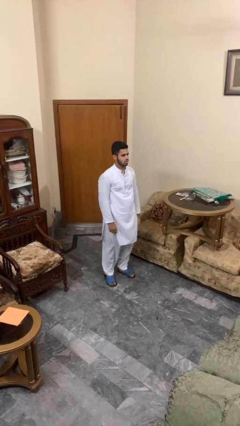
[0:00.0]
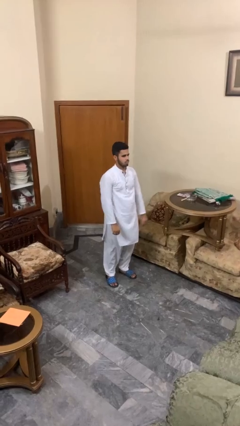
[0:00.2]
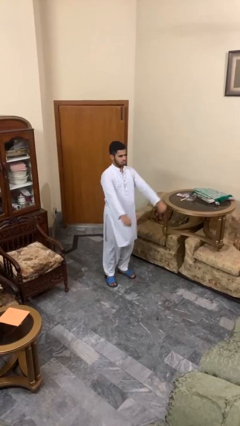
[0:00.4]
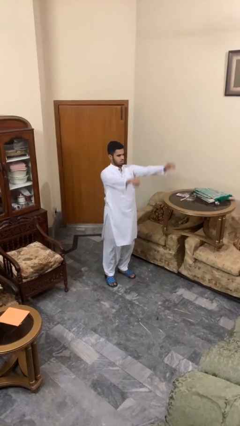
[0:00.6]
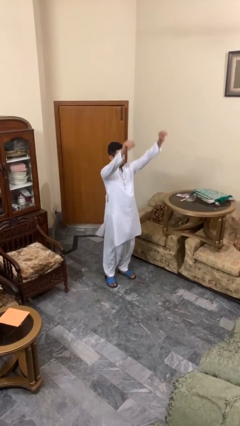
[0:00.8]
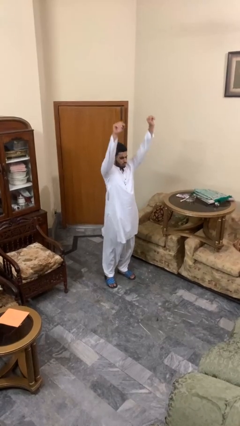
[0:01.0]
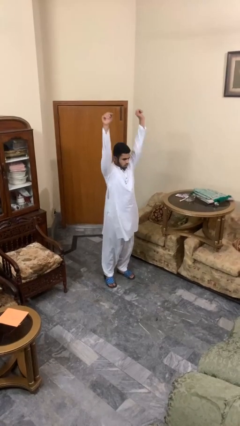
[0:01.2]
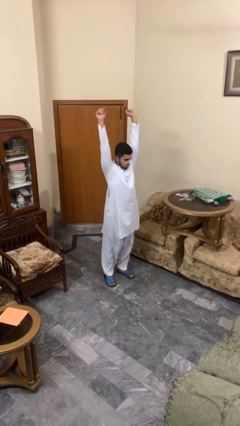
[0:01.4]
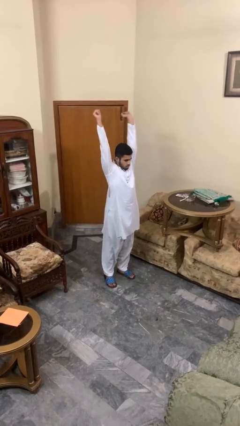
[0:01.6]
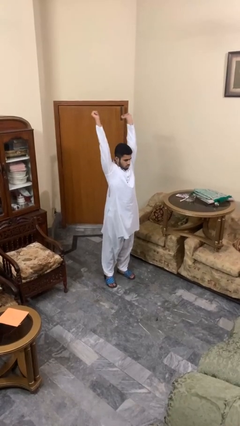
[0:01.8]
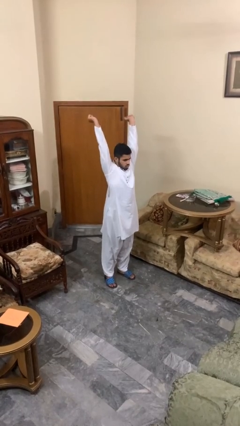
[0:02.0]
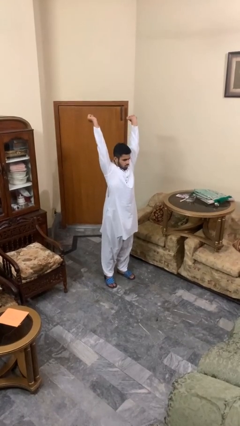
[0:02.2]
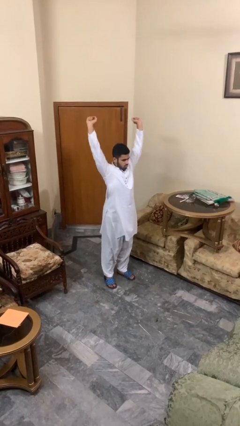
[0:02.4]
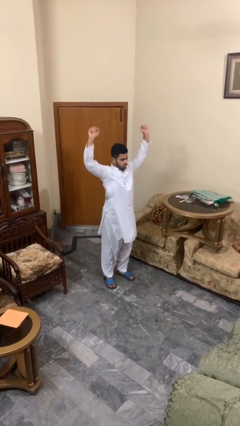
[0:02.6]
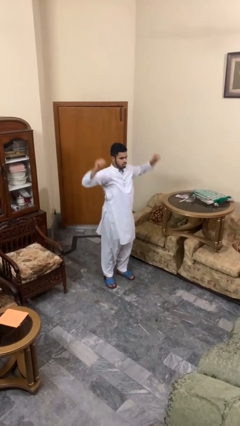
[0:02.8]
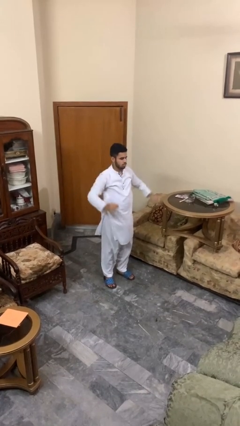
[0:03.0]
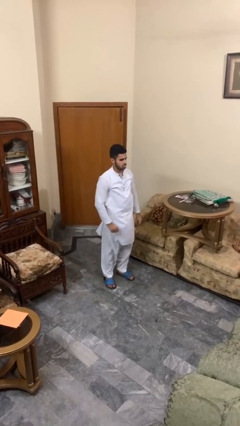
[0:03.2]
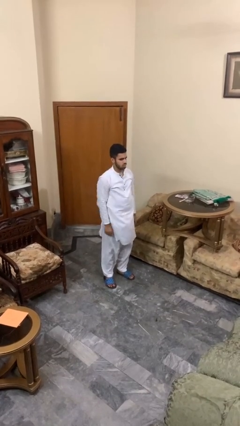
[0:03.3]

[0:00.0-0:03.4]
person stretches arms over head

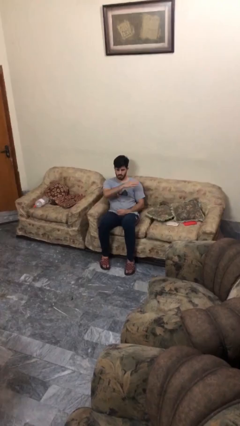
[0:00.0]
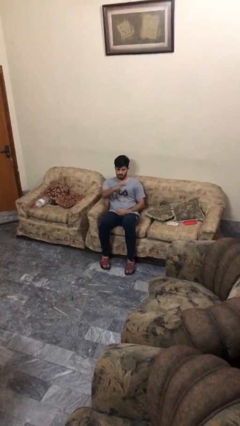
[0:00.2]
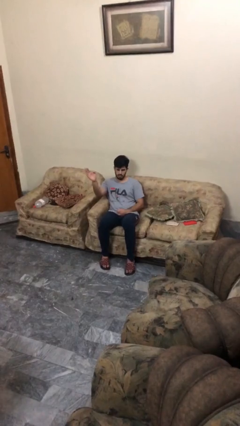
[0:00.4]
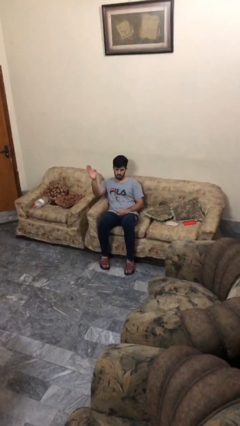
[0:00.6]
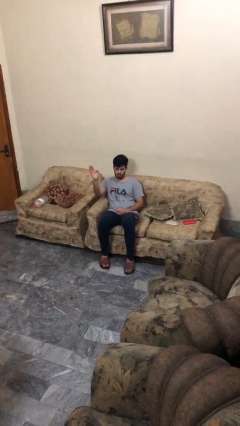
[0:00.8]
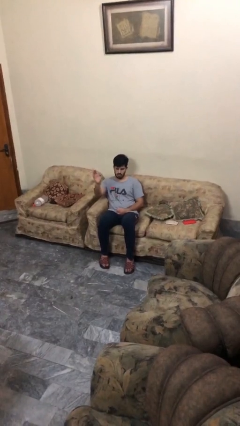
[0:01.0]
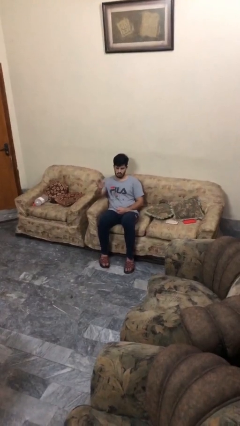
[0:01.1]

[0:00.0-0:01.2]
person gestures swipe right

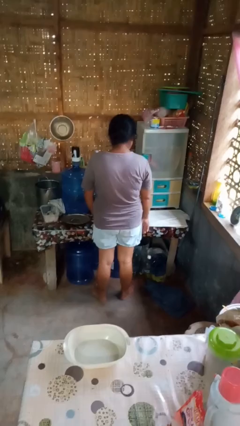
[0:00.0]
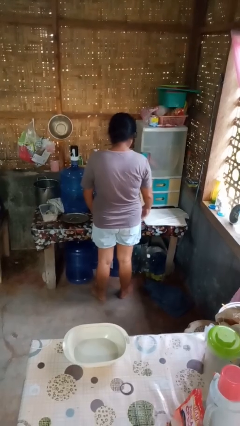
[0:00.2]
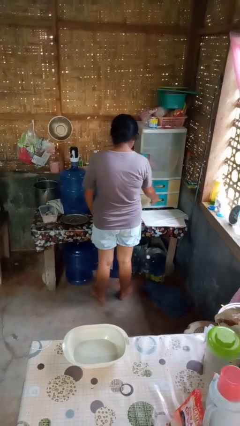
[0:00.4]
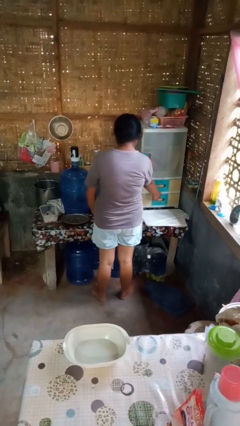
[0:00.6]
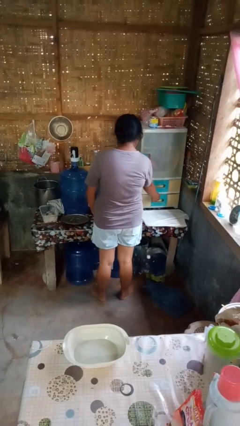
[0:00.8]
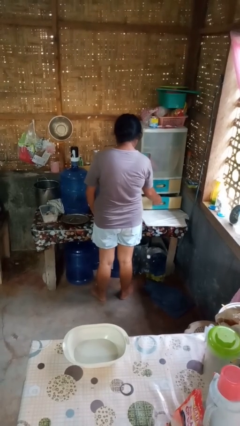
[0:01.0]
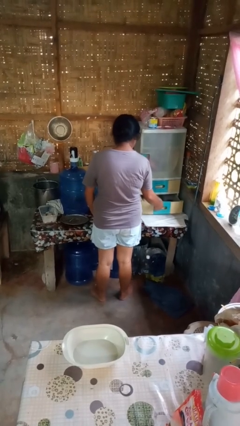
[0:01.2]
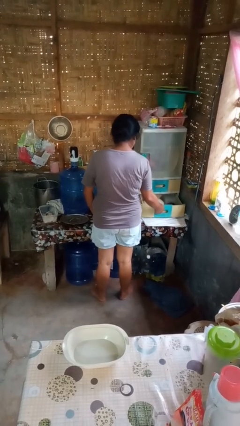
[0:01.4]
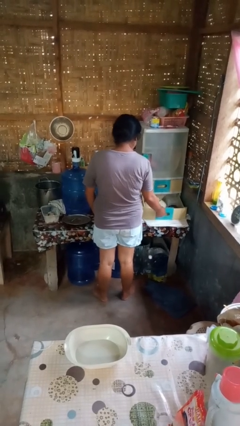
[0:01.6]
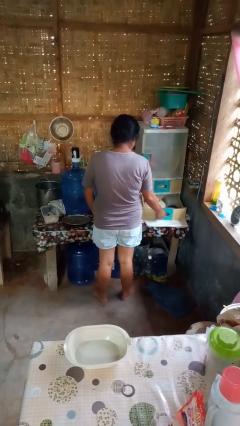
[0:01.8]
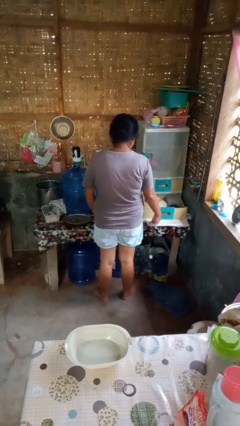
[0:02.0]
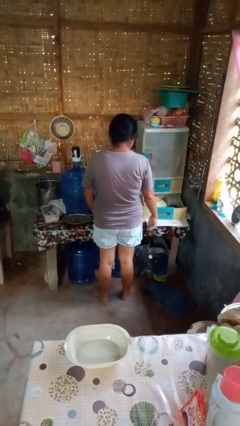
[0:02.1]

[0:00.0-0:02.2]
person opens kitchen drawer

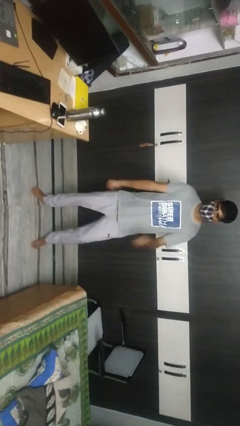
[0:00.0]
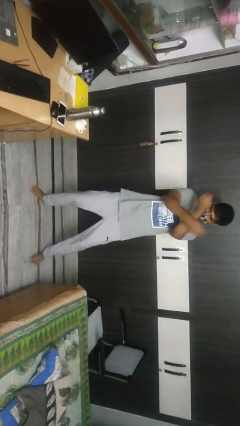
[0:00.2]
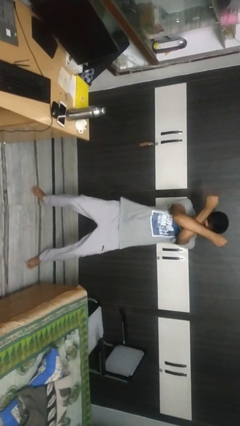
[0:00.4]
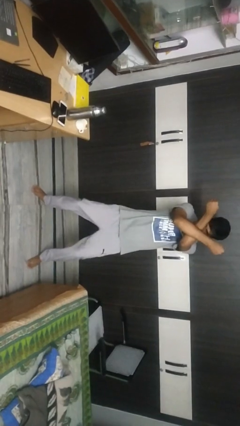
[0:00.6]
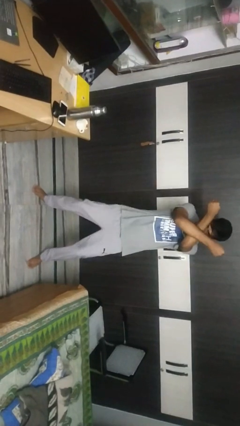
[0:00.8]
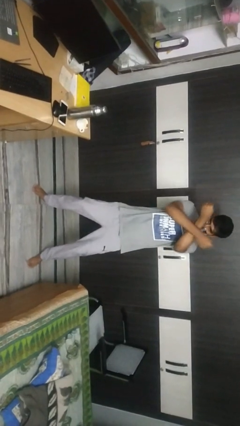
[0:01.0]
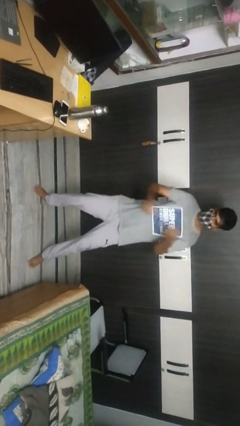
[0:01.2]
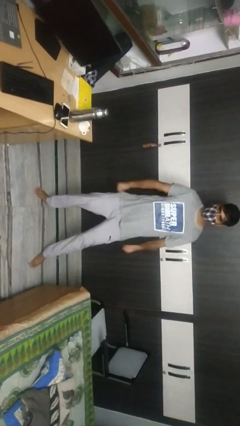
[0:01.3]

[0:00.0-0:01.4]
person gestures arms x

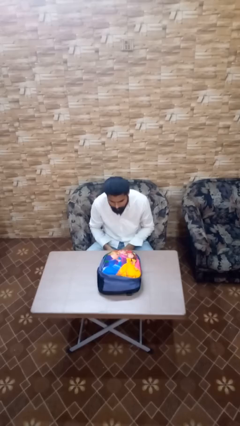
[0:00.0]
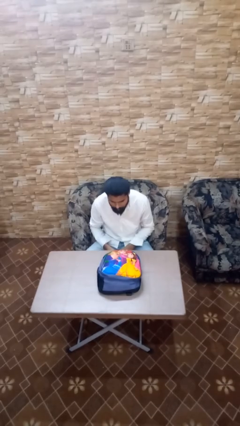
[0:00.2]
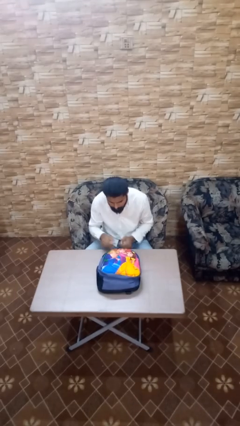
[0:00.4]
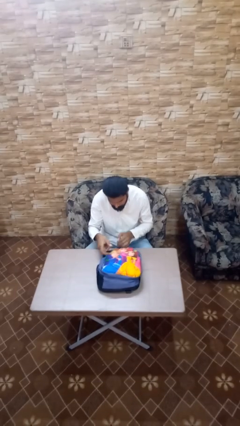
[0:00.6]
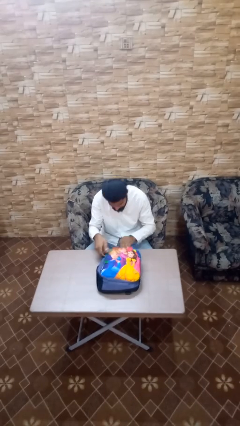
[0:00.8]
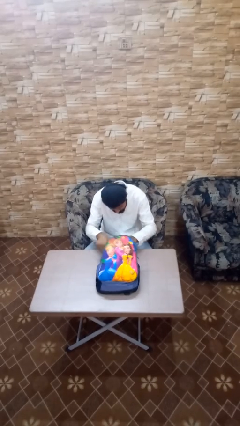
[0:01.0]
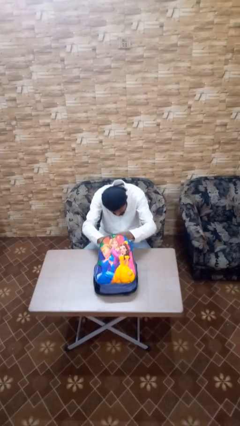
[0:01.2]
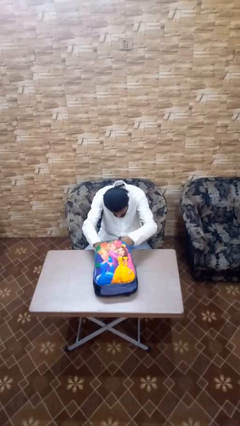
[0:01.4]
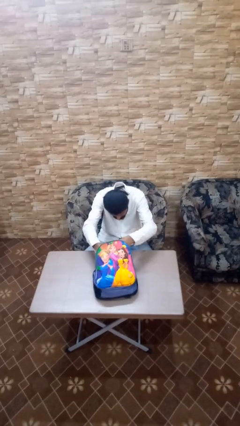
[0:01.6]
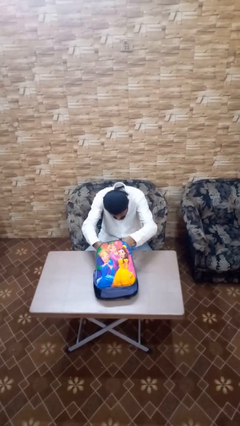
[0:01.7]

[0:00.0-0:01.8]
person searches in backpack

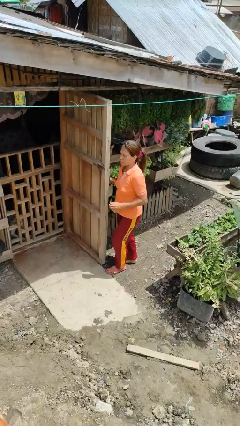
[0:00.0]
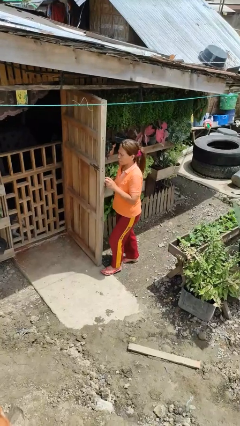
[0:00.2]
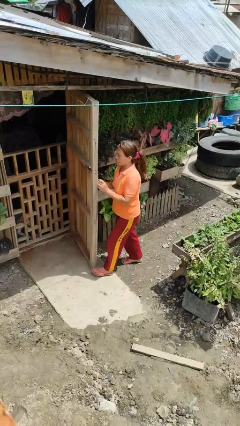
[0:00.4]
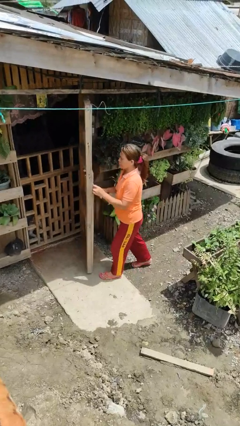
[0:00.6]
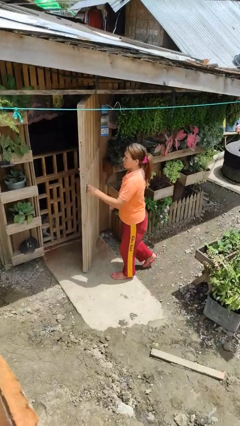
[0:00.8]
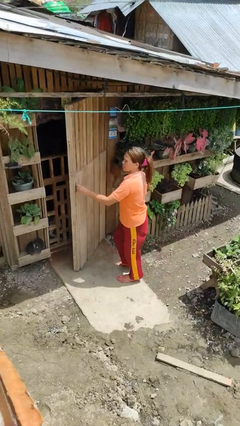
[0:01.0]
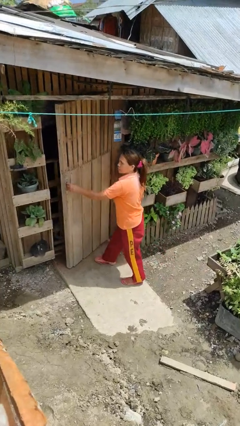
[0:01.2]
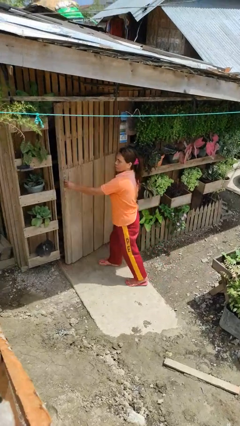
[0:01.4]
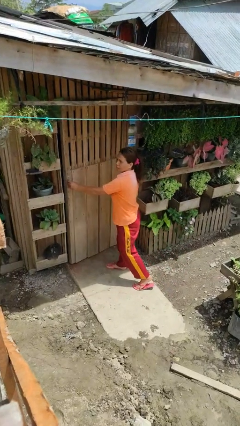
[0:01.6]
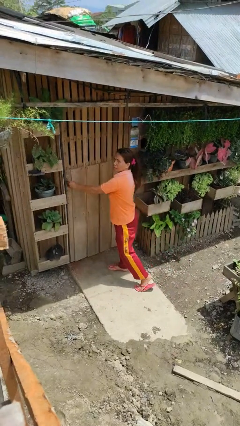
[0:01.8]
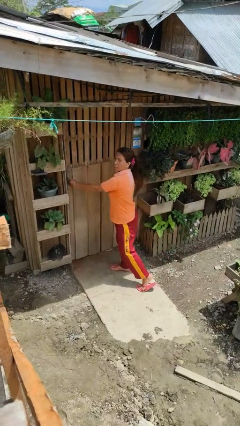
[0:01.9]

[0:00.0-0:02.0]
person closes facility door

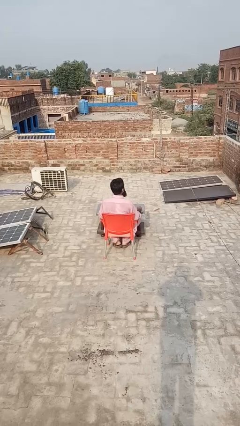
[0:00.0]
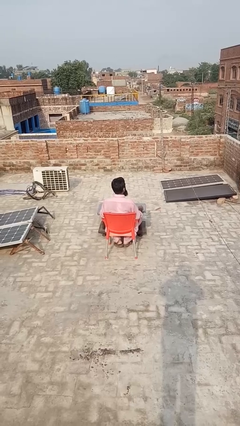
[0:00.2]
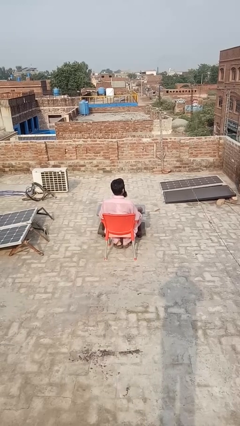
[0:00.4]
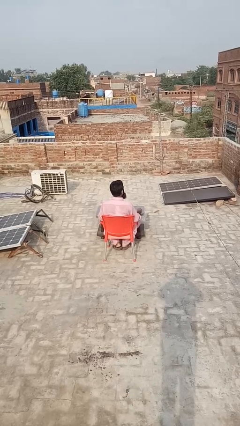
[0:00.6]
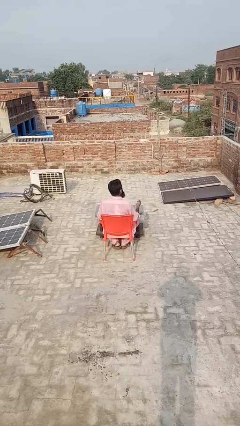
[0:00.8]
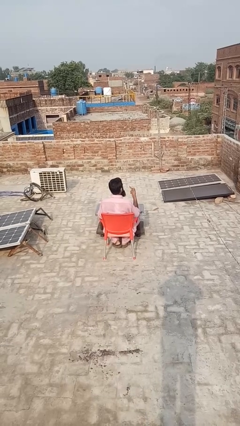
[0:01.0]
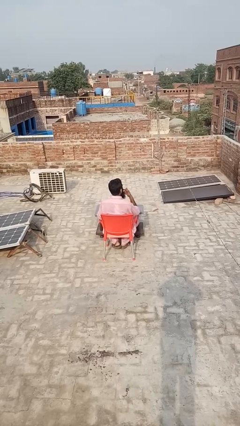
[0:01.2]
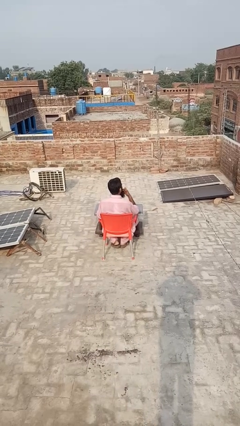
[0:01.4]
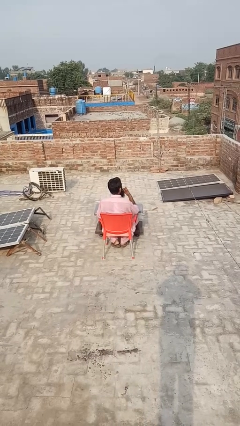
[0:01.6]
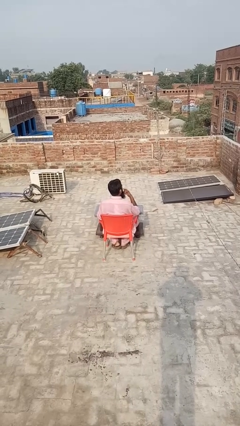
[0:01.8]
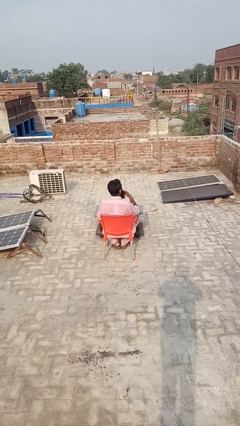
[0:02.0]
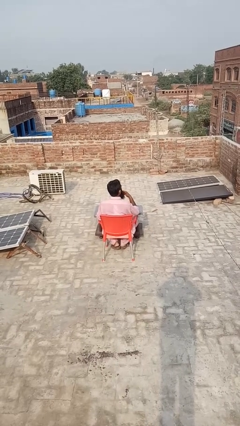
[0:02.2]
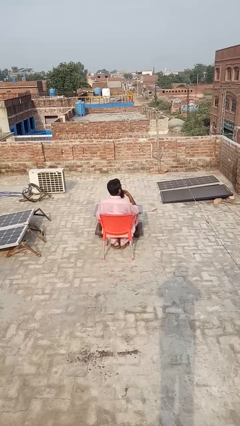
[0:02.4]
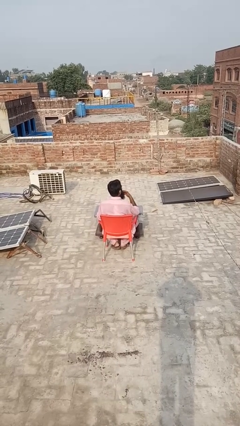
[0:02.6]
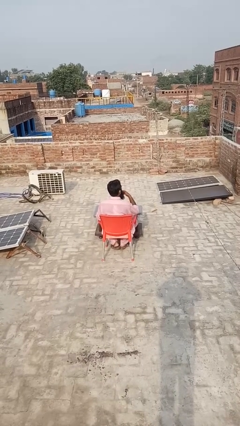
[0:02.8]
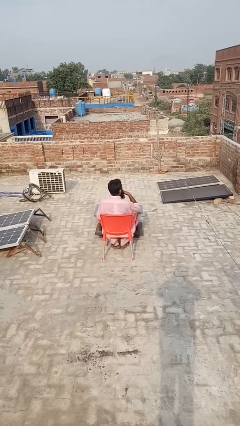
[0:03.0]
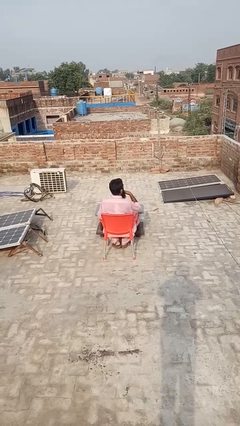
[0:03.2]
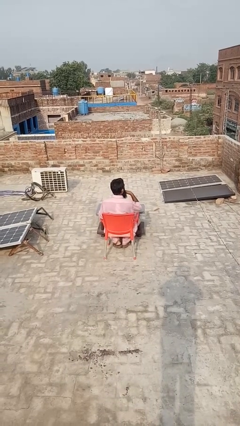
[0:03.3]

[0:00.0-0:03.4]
person licks fingers

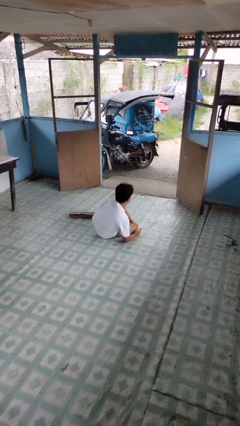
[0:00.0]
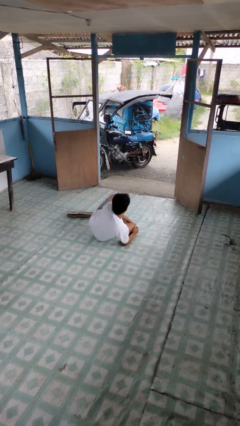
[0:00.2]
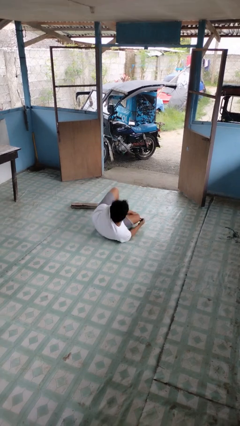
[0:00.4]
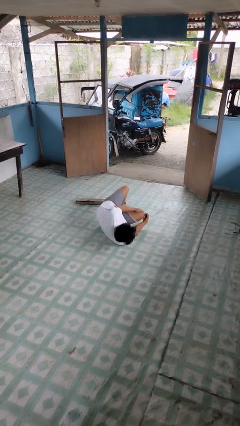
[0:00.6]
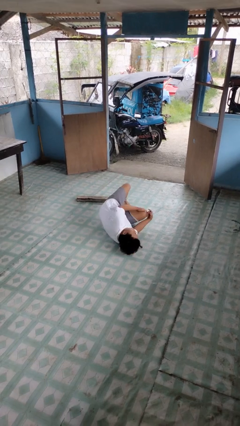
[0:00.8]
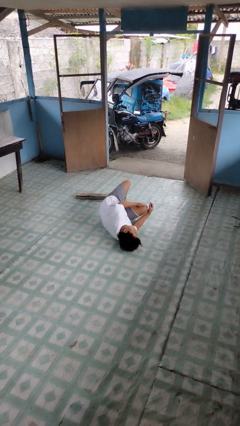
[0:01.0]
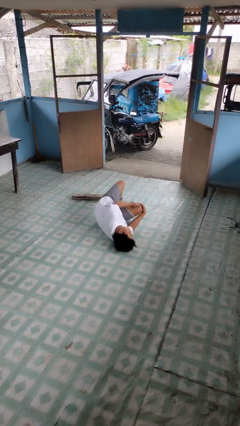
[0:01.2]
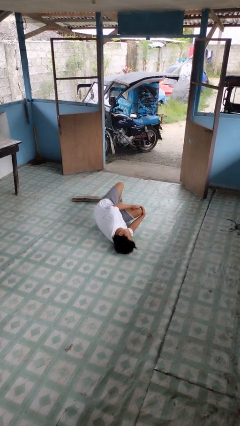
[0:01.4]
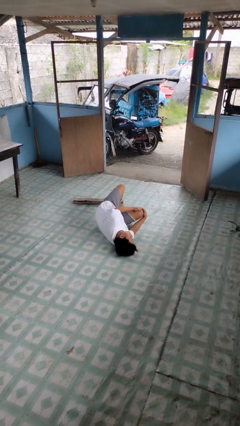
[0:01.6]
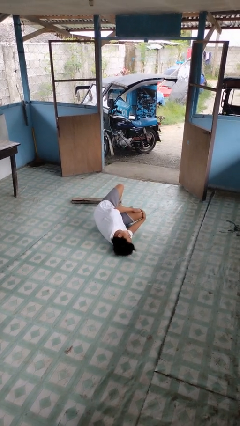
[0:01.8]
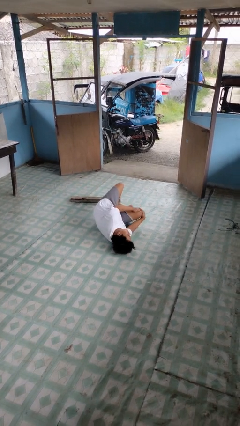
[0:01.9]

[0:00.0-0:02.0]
person lies down on floor
